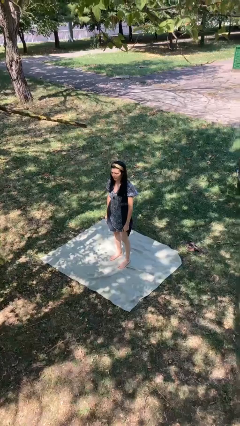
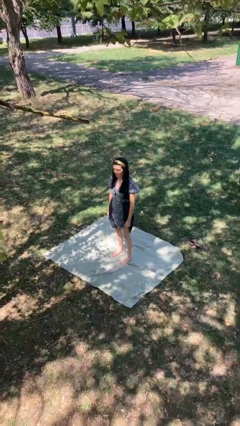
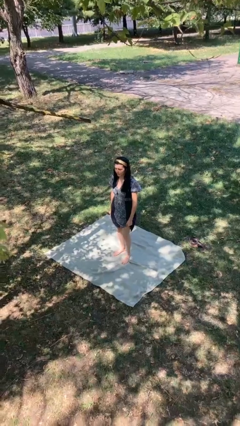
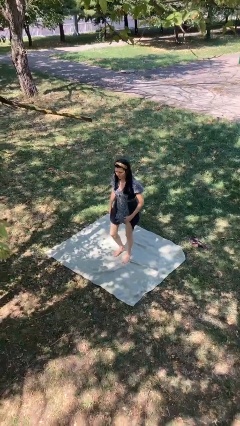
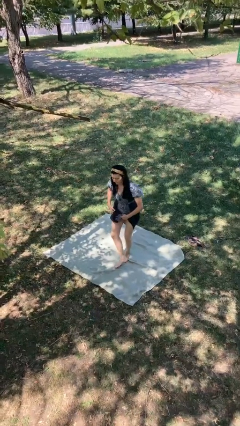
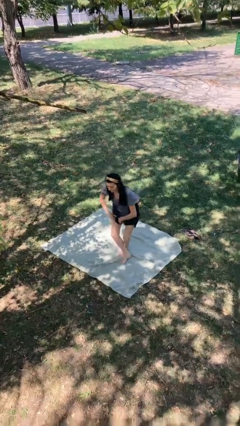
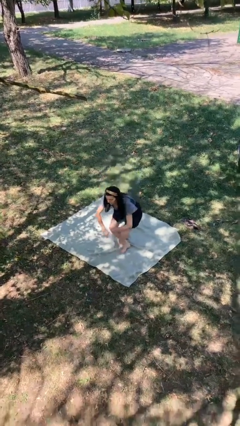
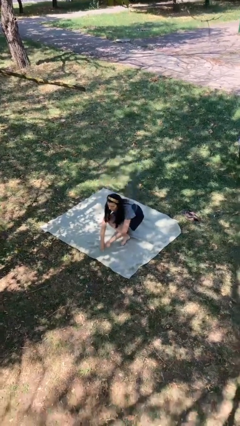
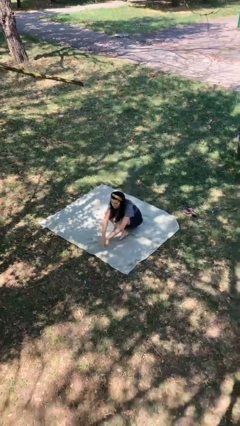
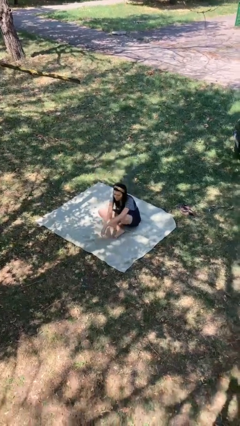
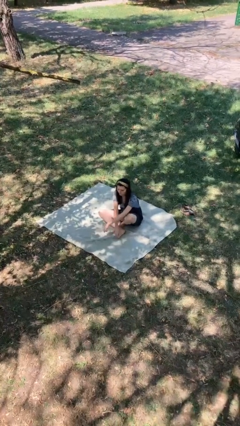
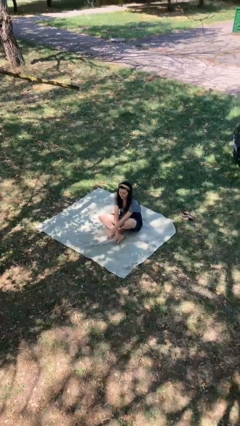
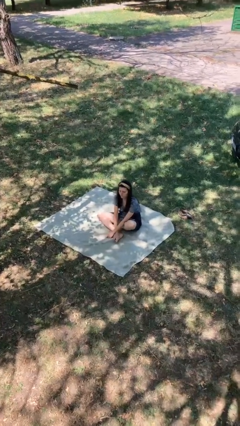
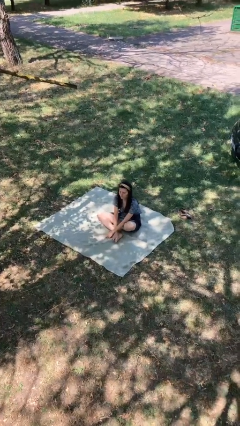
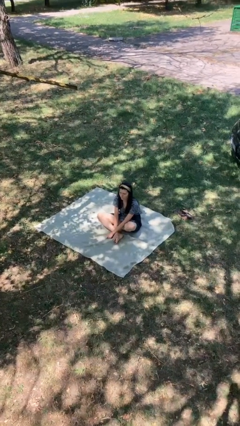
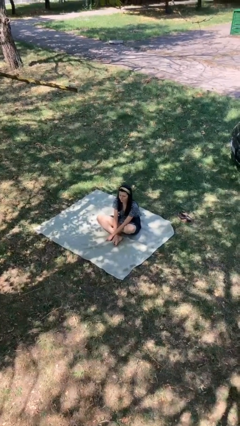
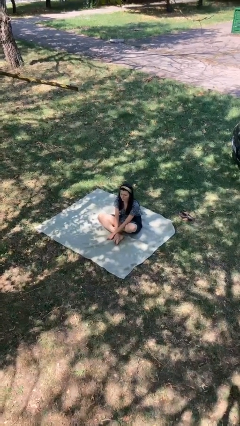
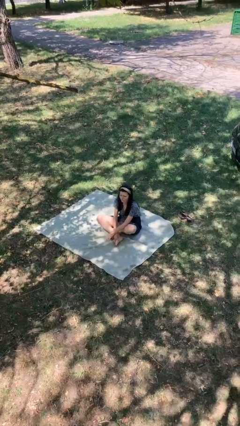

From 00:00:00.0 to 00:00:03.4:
person sits crisscross

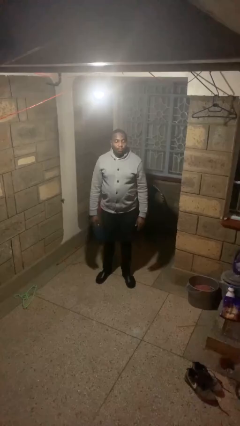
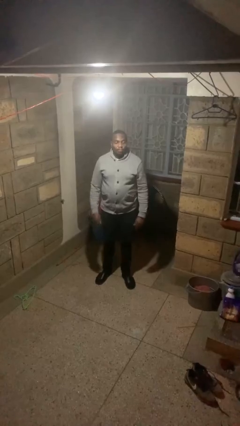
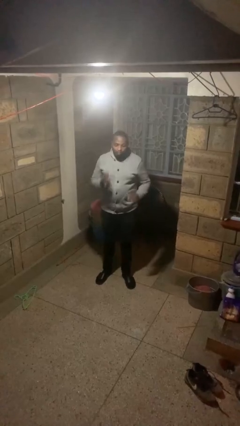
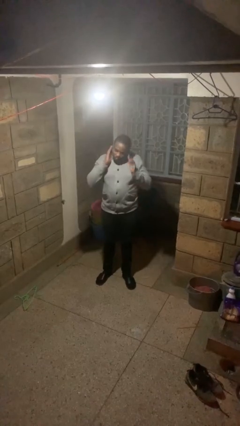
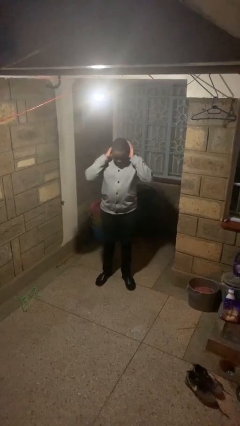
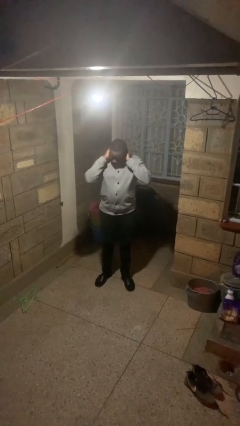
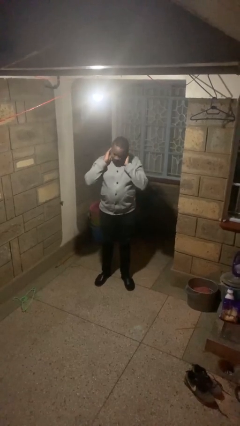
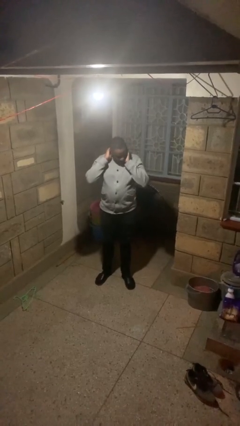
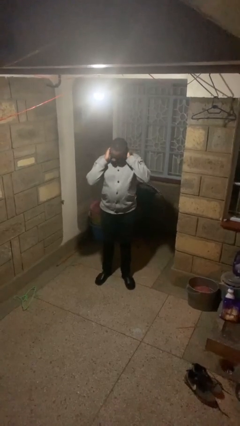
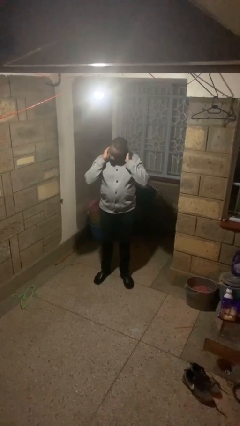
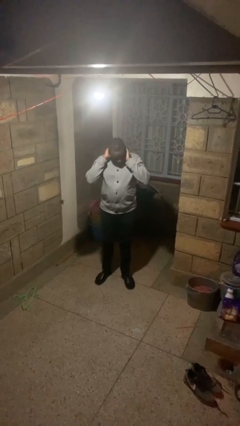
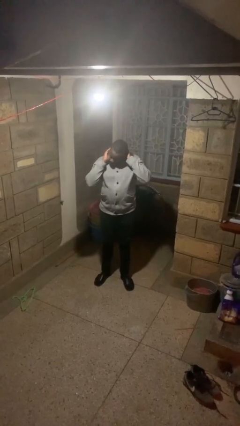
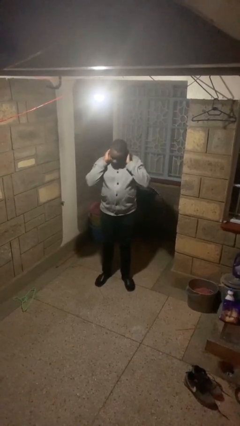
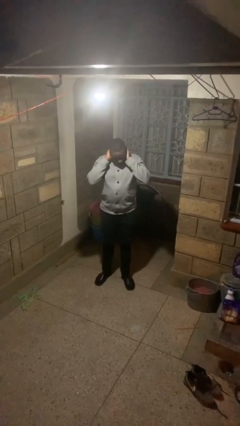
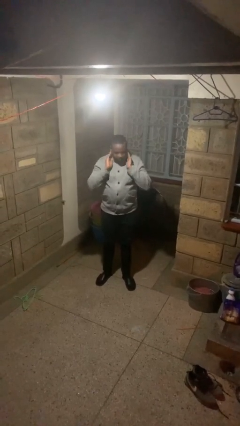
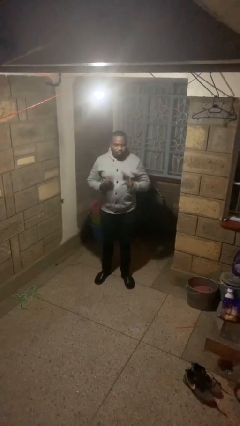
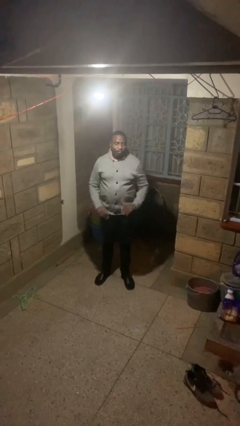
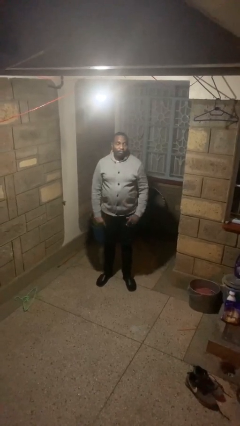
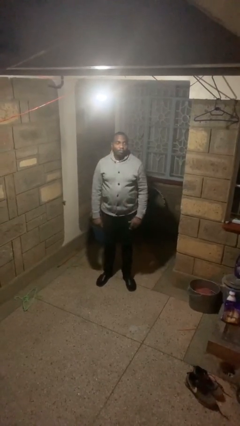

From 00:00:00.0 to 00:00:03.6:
person rubs neck

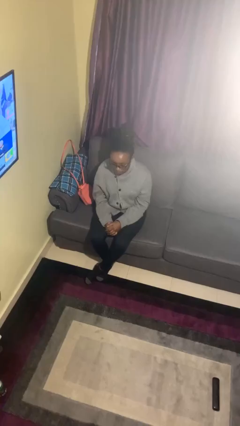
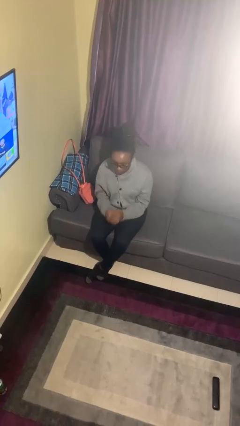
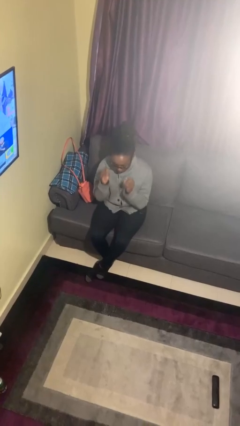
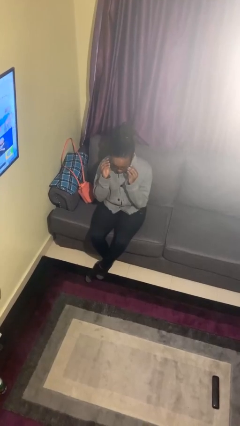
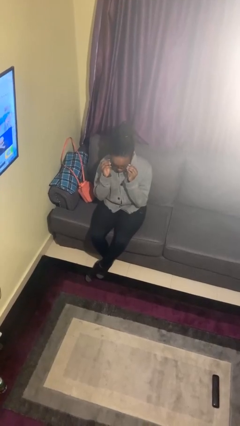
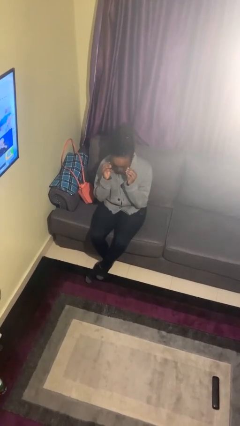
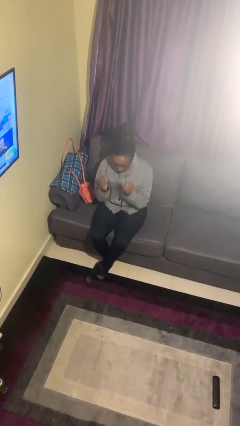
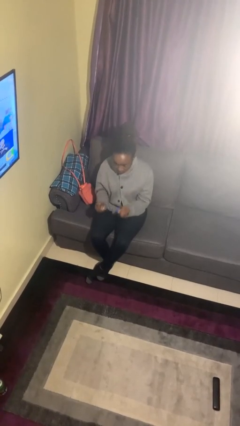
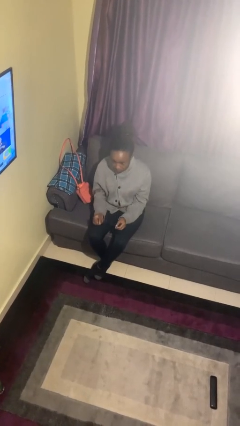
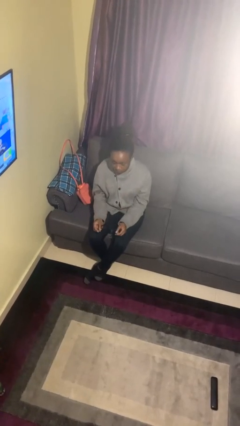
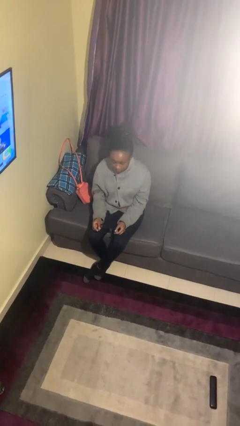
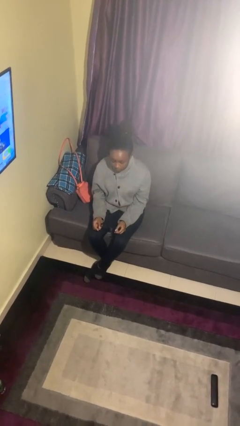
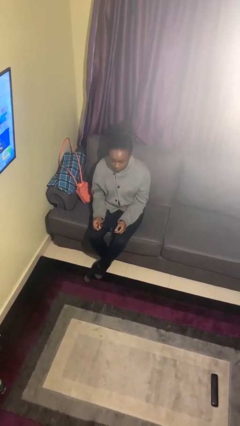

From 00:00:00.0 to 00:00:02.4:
person takes off glasses

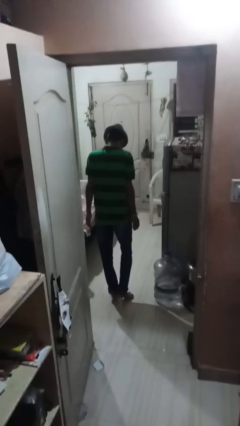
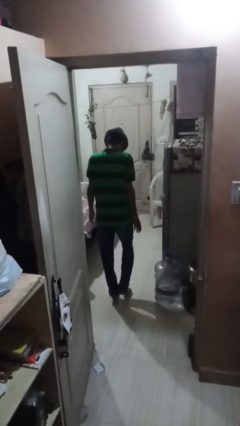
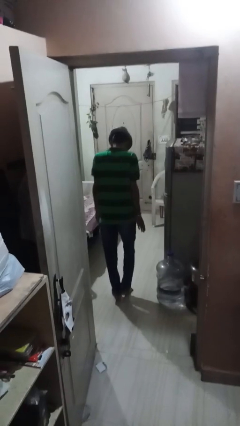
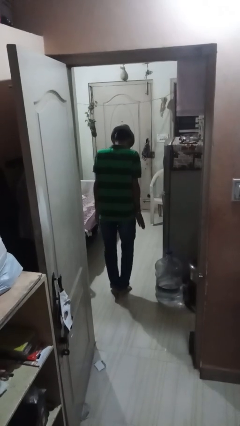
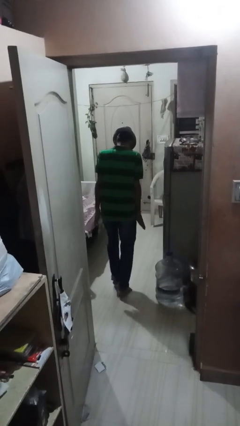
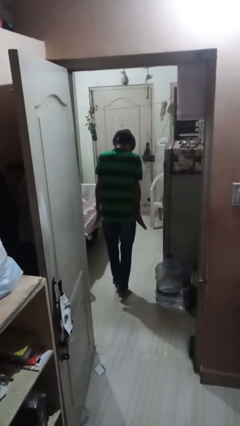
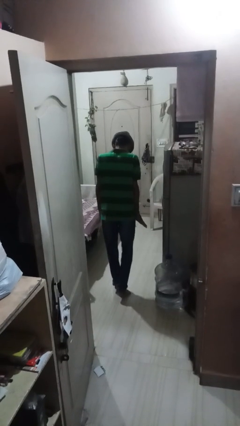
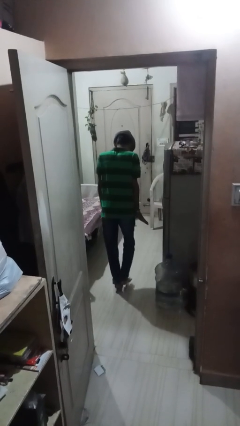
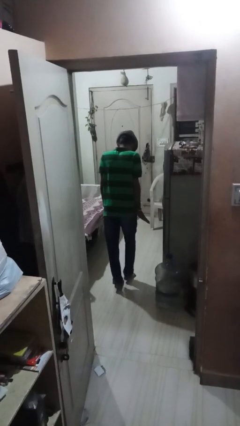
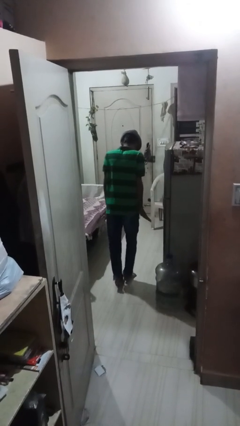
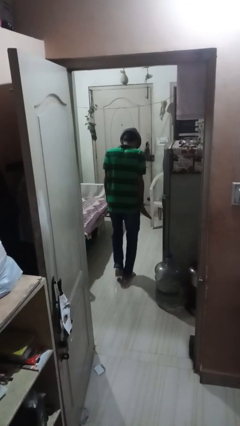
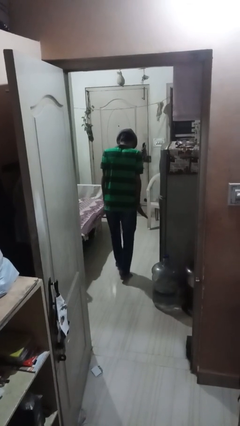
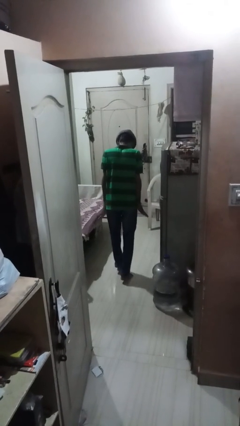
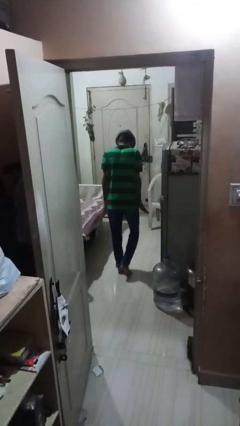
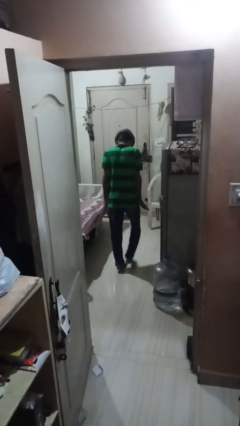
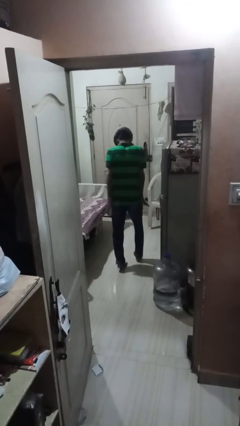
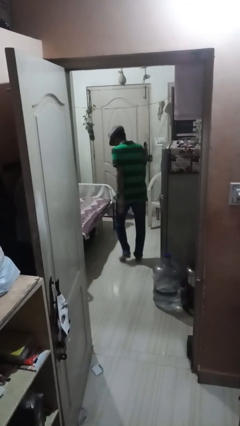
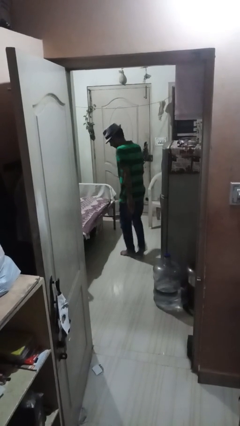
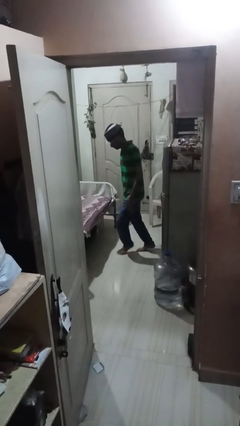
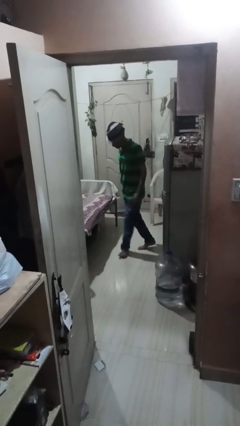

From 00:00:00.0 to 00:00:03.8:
person walks tiptoe

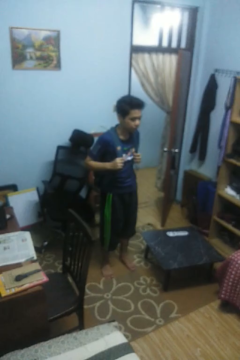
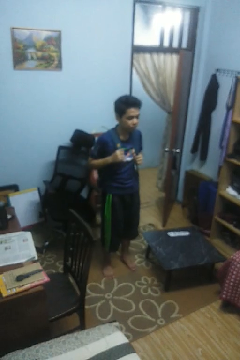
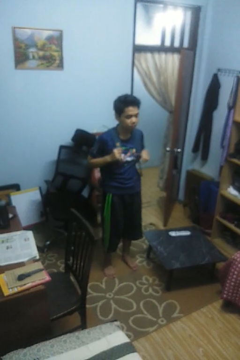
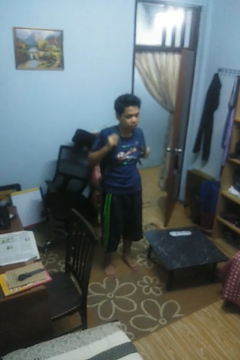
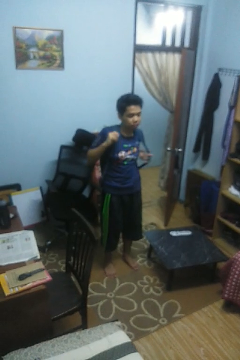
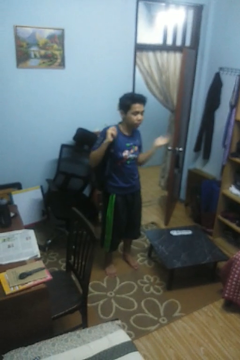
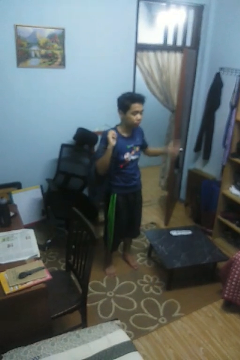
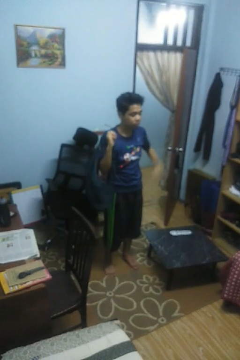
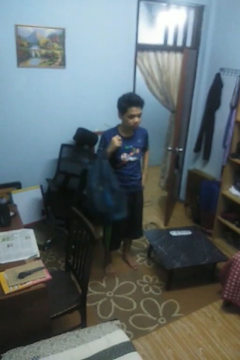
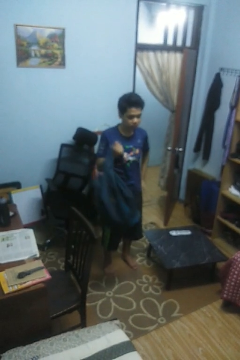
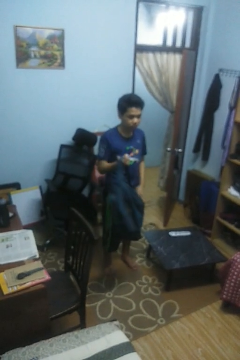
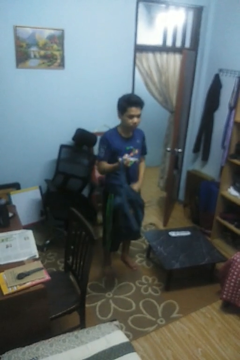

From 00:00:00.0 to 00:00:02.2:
person takes off backpack

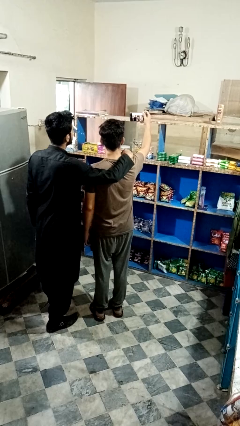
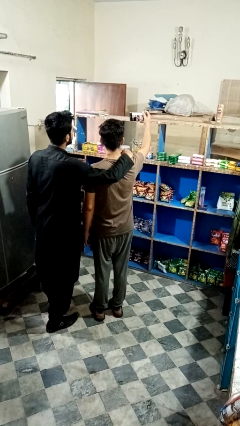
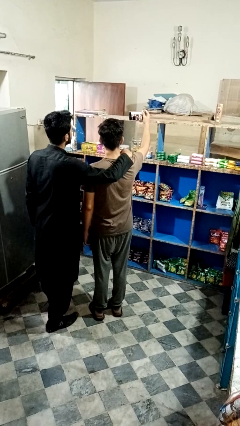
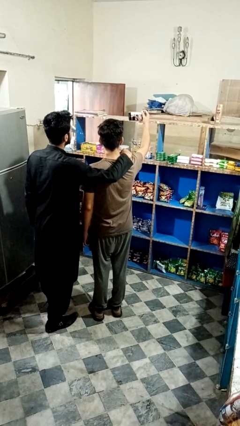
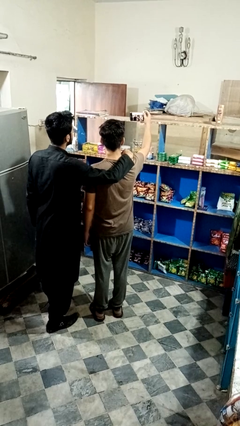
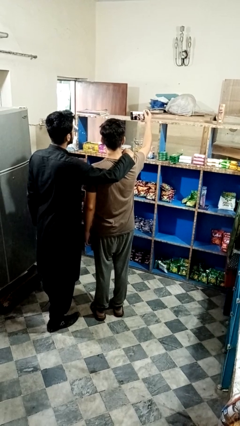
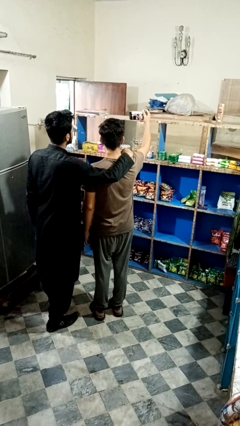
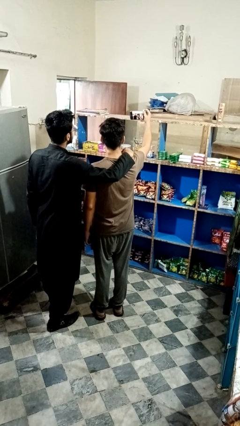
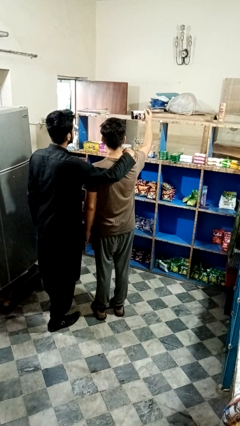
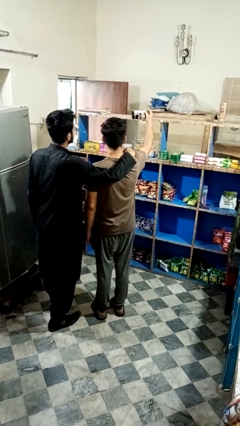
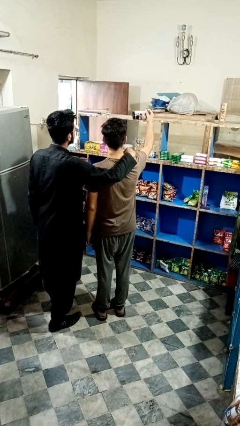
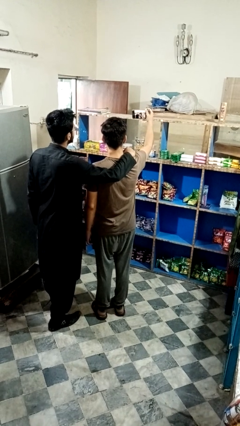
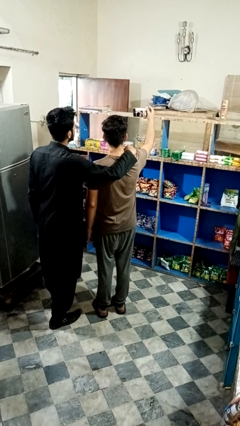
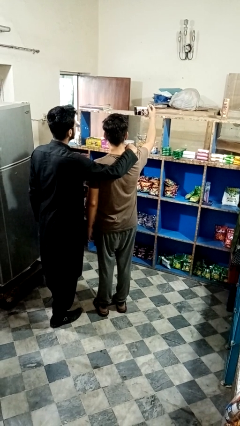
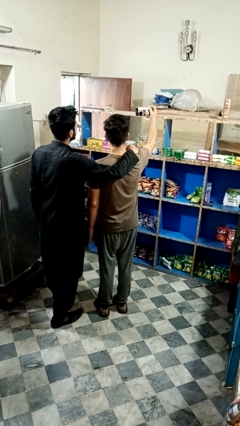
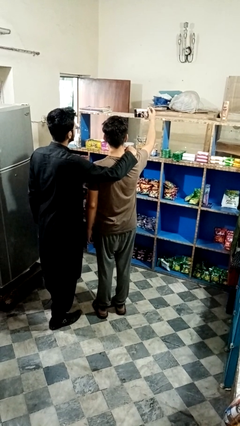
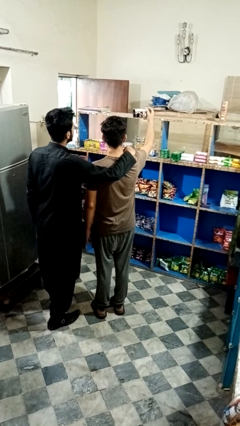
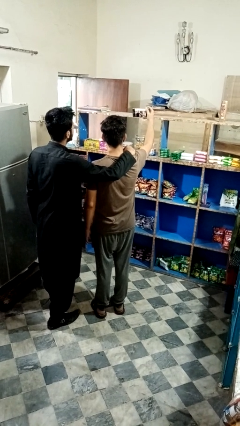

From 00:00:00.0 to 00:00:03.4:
person takes selfie with person
